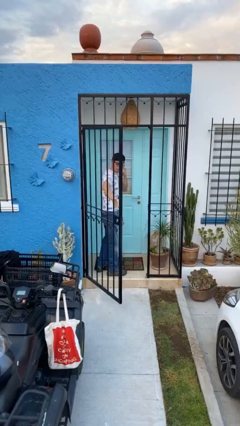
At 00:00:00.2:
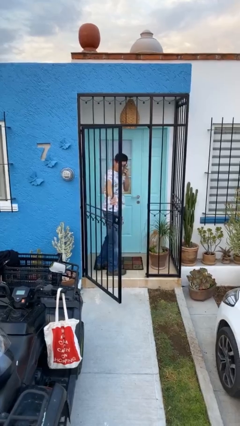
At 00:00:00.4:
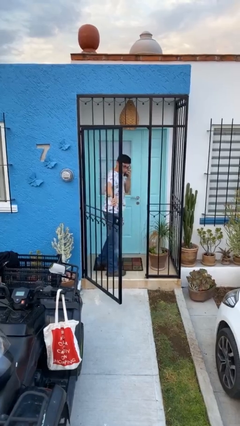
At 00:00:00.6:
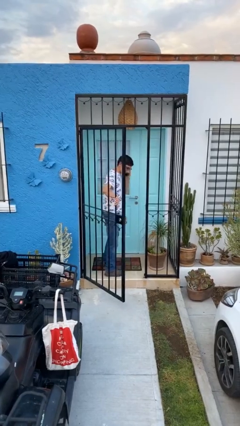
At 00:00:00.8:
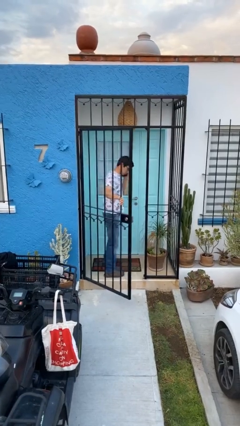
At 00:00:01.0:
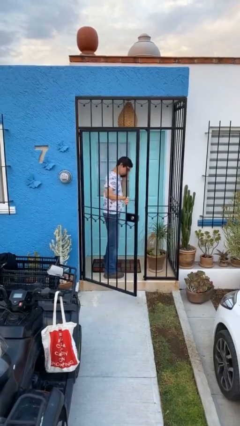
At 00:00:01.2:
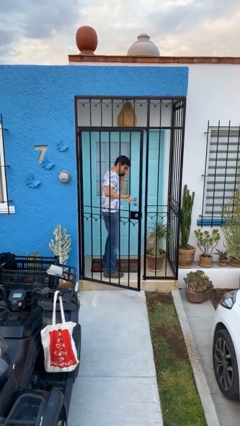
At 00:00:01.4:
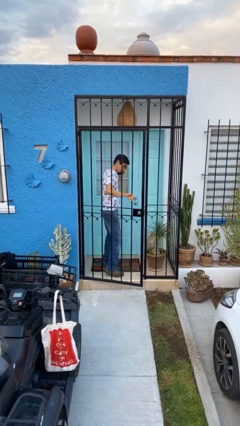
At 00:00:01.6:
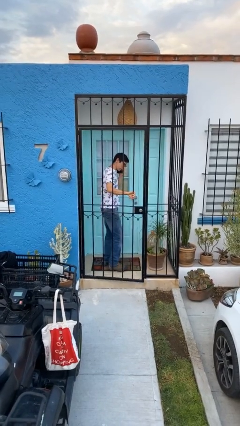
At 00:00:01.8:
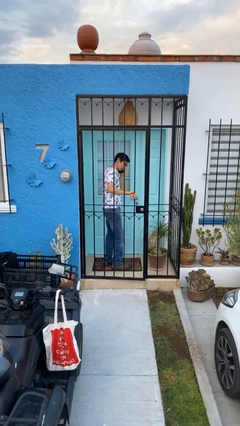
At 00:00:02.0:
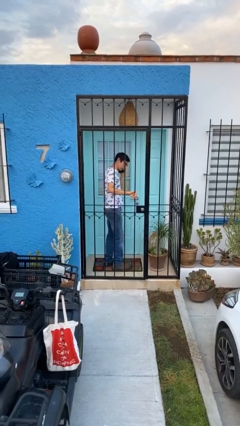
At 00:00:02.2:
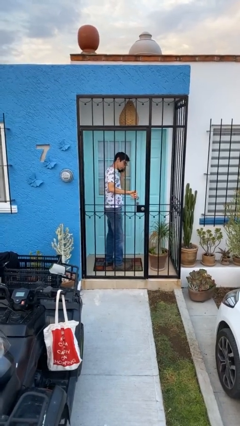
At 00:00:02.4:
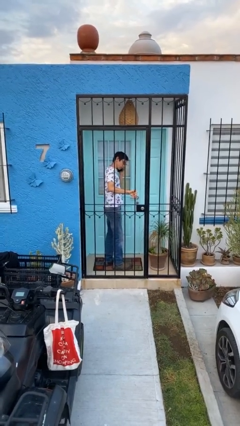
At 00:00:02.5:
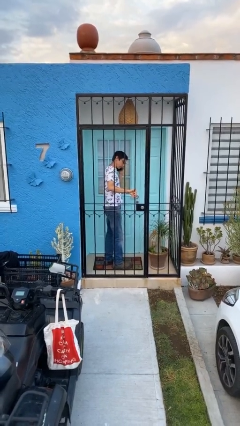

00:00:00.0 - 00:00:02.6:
person closes facility door

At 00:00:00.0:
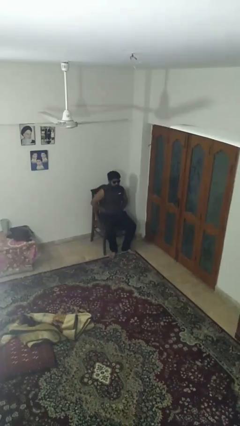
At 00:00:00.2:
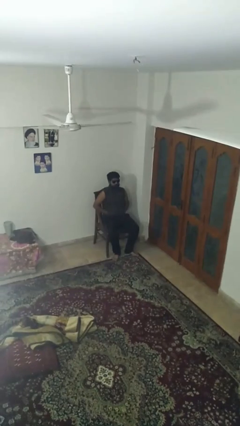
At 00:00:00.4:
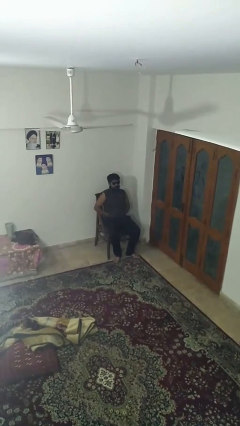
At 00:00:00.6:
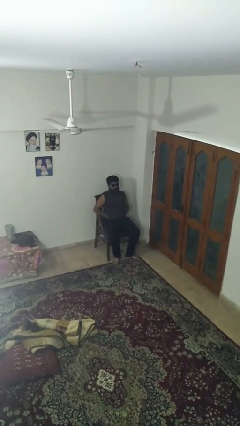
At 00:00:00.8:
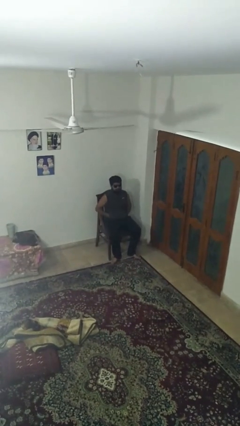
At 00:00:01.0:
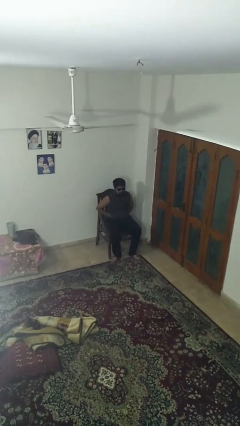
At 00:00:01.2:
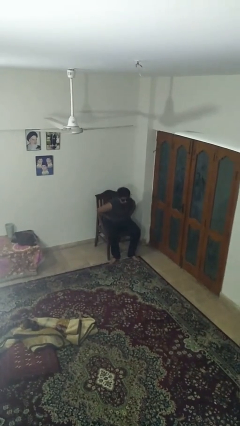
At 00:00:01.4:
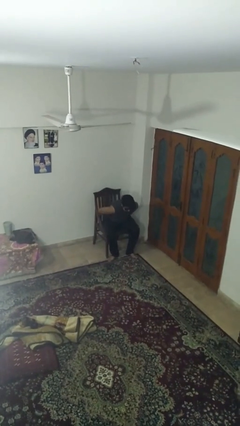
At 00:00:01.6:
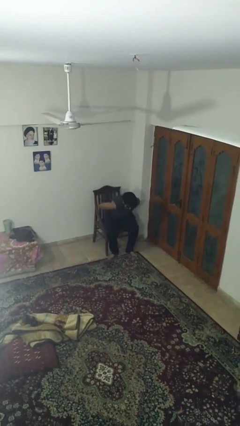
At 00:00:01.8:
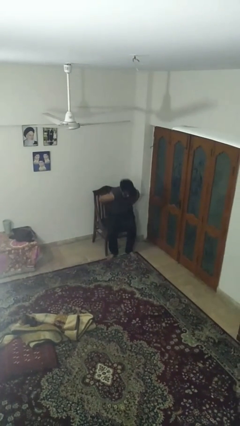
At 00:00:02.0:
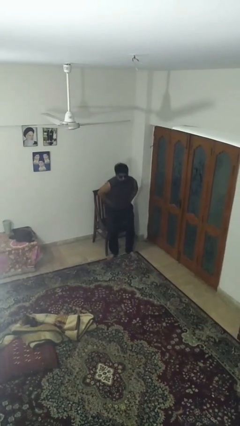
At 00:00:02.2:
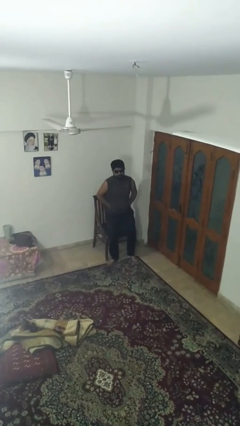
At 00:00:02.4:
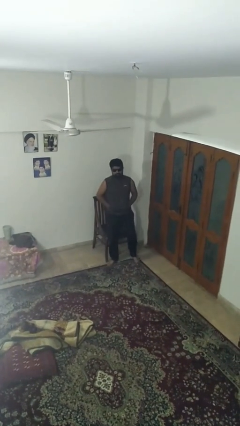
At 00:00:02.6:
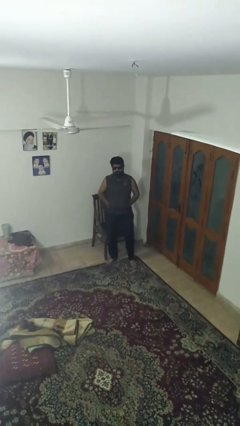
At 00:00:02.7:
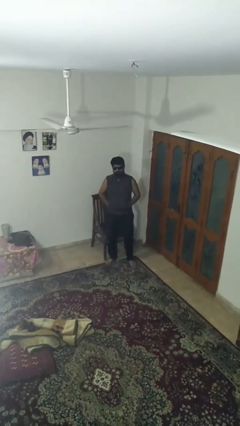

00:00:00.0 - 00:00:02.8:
person stands up

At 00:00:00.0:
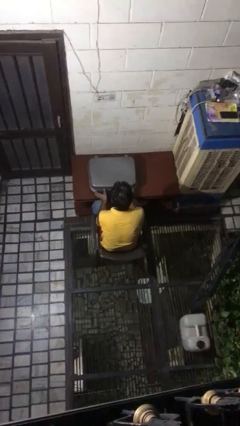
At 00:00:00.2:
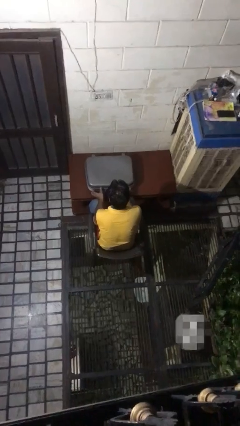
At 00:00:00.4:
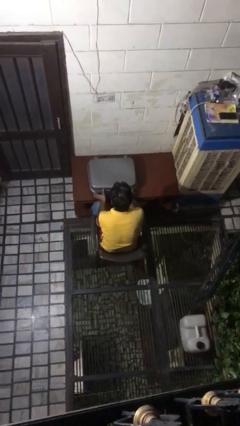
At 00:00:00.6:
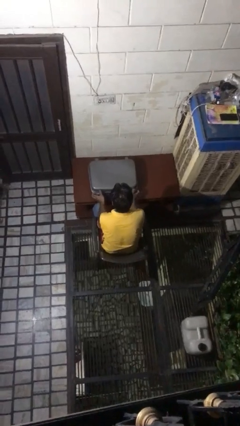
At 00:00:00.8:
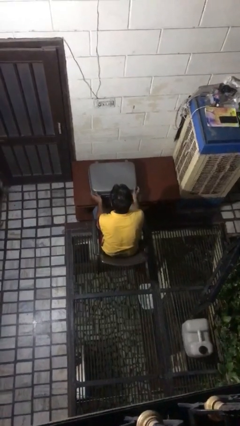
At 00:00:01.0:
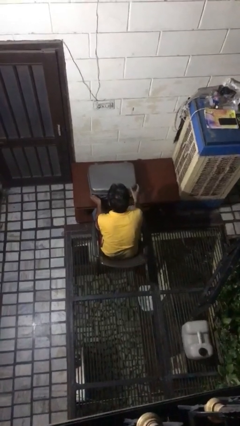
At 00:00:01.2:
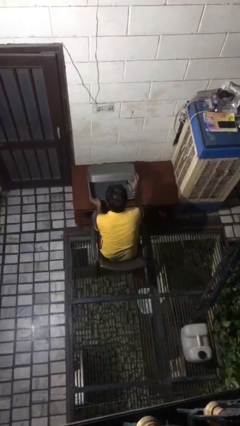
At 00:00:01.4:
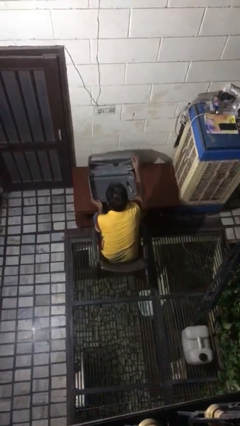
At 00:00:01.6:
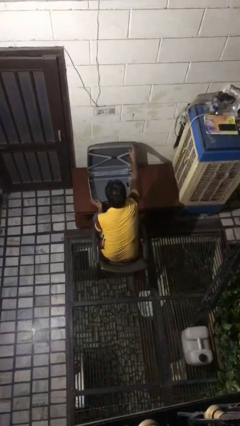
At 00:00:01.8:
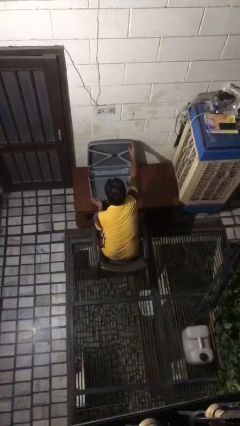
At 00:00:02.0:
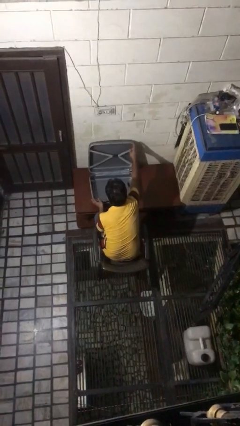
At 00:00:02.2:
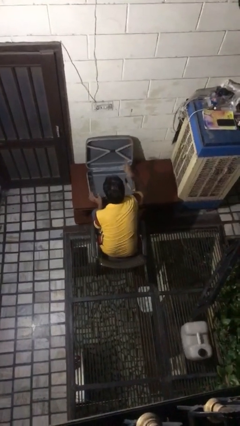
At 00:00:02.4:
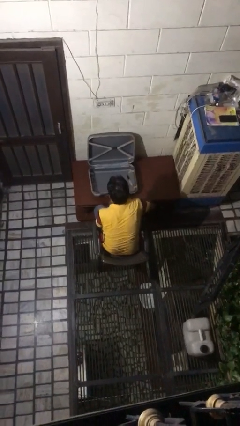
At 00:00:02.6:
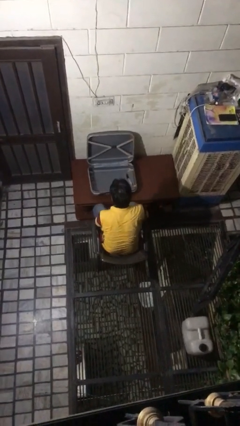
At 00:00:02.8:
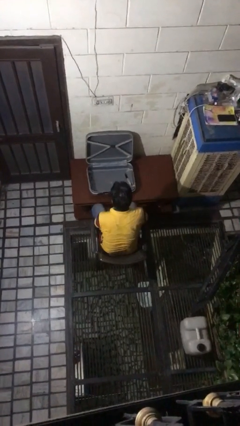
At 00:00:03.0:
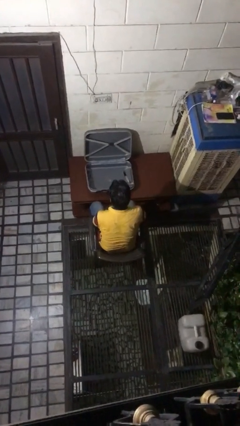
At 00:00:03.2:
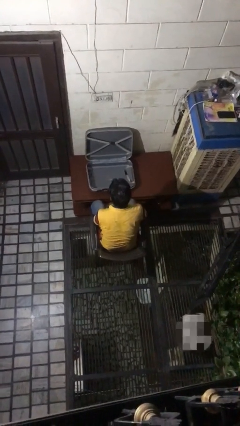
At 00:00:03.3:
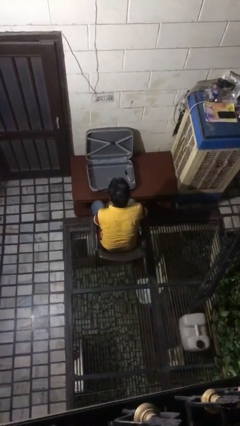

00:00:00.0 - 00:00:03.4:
person opens suitcase

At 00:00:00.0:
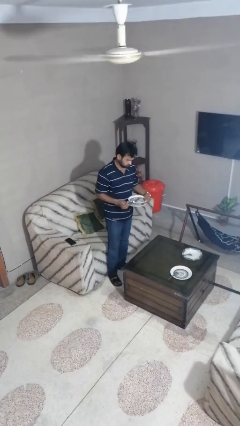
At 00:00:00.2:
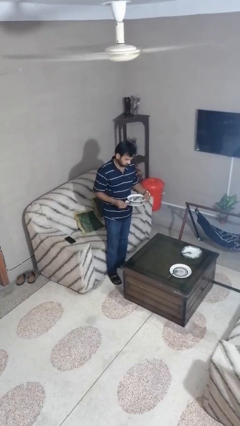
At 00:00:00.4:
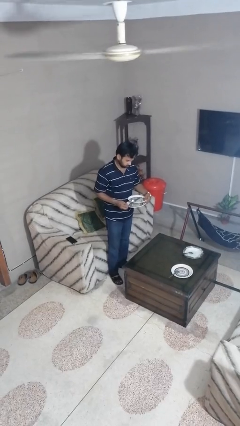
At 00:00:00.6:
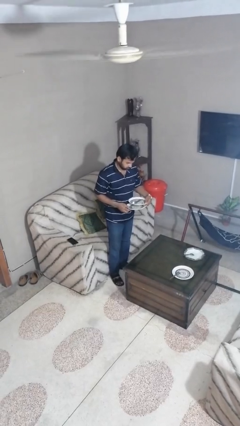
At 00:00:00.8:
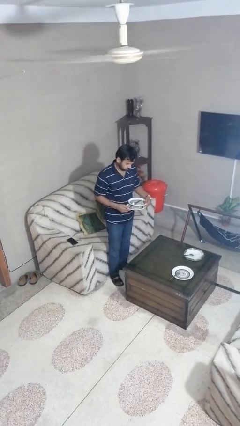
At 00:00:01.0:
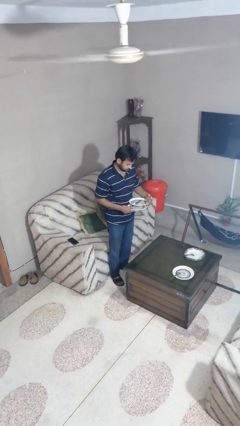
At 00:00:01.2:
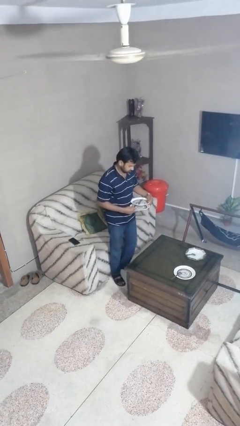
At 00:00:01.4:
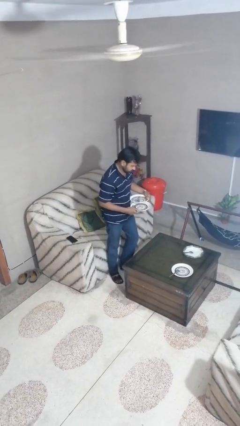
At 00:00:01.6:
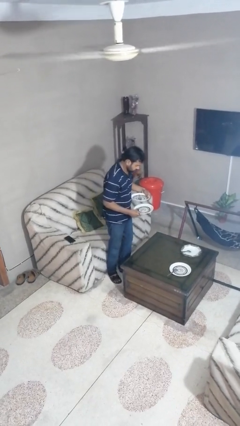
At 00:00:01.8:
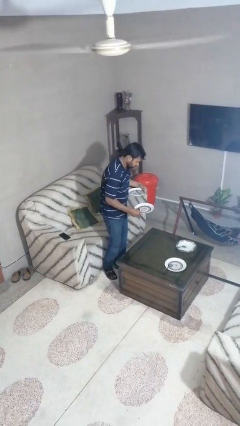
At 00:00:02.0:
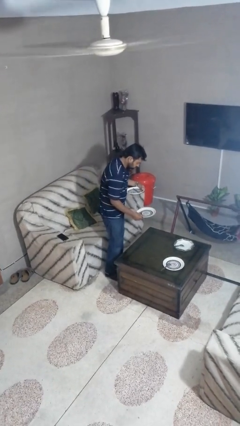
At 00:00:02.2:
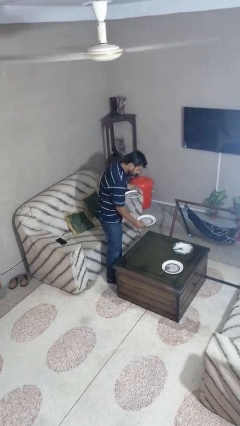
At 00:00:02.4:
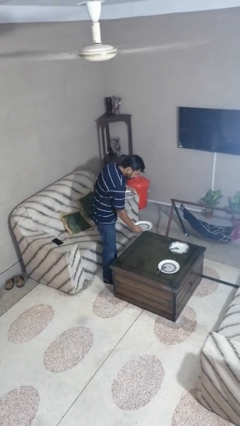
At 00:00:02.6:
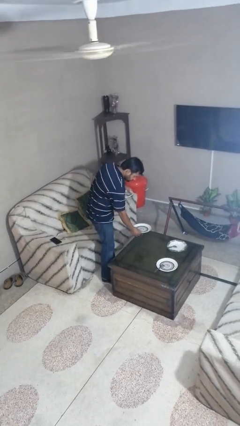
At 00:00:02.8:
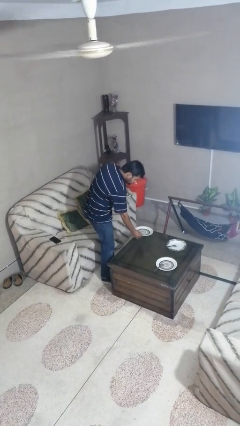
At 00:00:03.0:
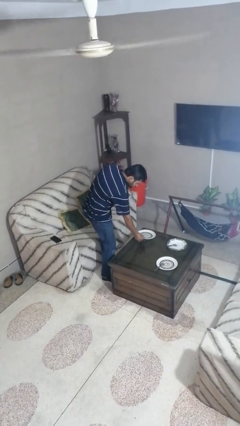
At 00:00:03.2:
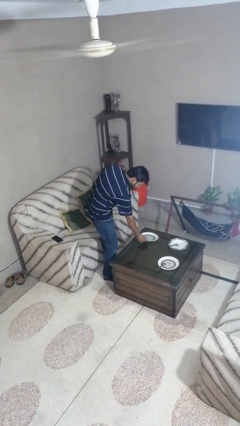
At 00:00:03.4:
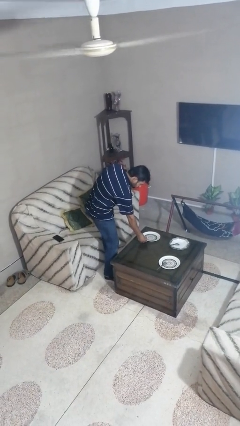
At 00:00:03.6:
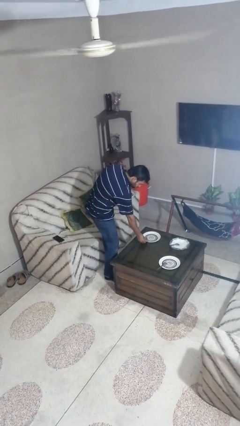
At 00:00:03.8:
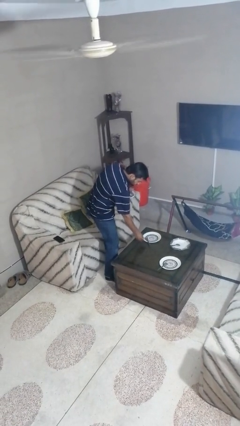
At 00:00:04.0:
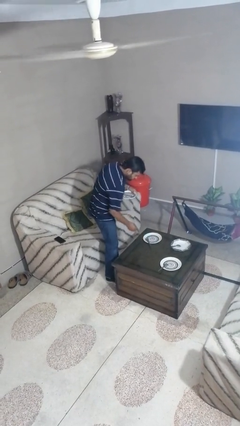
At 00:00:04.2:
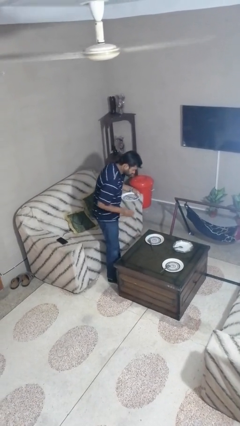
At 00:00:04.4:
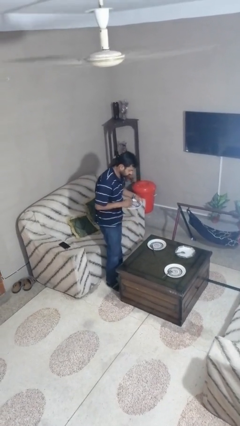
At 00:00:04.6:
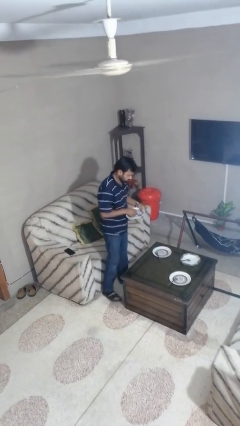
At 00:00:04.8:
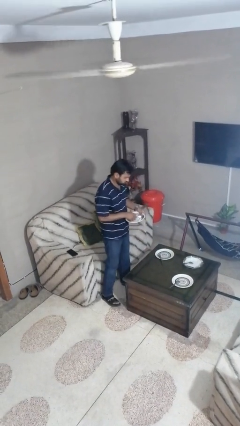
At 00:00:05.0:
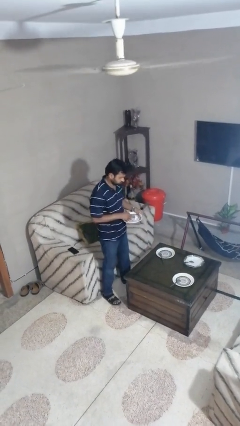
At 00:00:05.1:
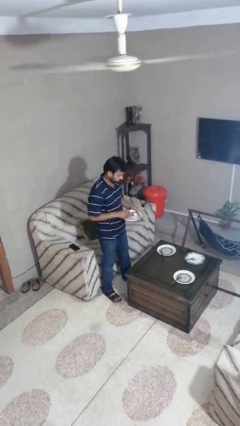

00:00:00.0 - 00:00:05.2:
person sets table

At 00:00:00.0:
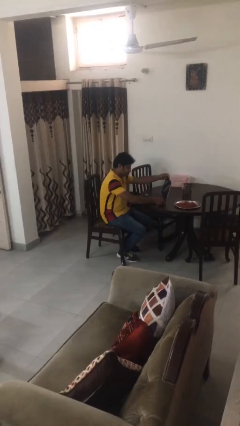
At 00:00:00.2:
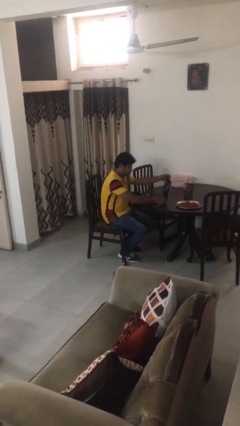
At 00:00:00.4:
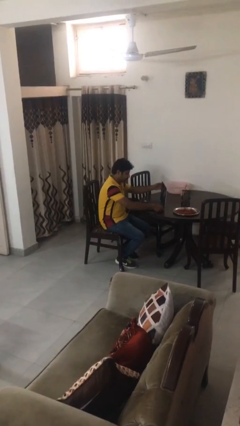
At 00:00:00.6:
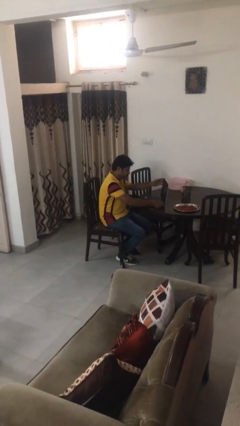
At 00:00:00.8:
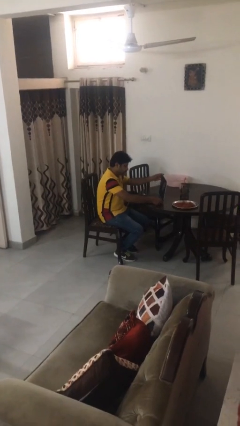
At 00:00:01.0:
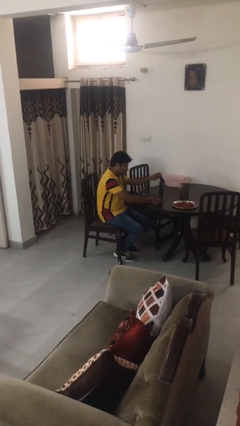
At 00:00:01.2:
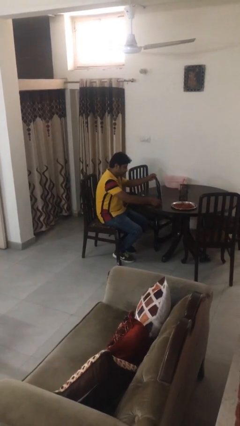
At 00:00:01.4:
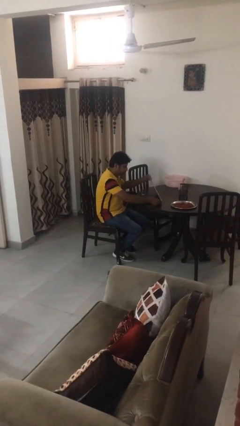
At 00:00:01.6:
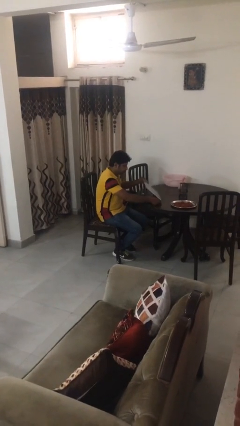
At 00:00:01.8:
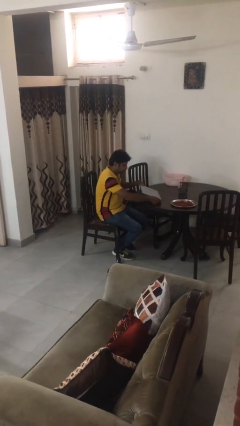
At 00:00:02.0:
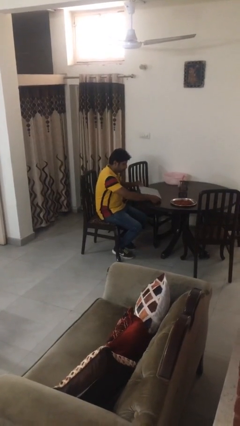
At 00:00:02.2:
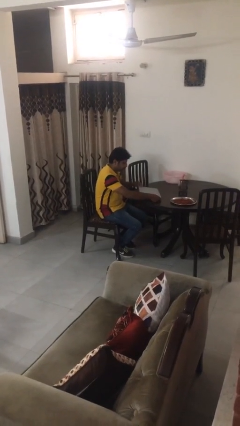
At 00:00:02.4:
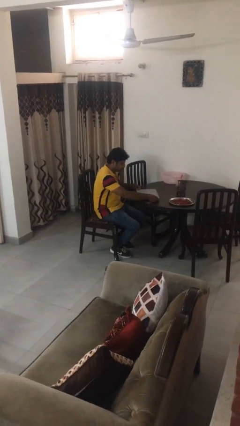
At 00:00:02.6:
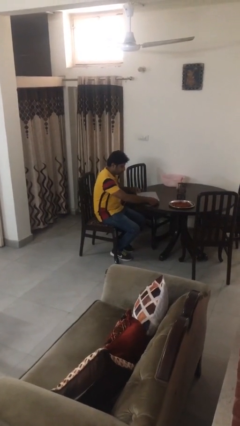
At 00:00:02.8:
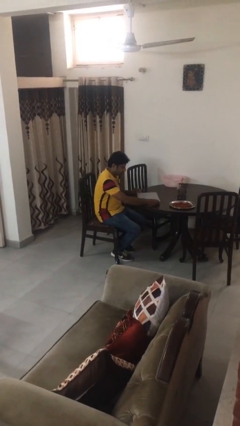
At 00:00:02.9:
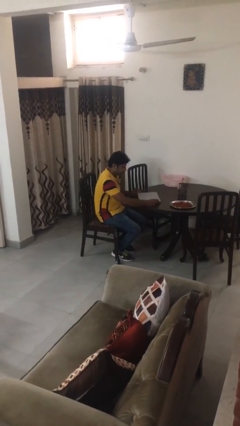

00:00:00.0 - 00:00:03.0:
person closes laptop

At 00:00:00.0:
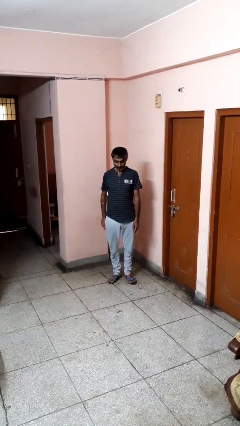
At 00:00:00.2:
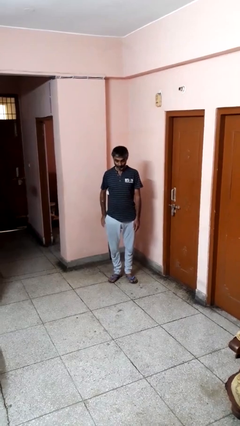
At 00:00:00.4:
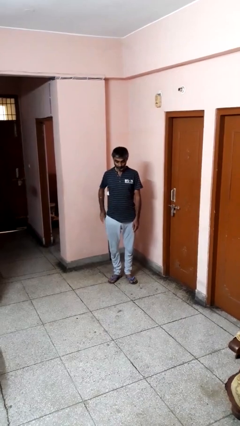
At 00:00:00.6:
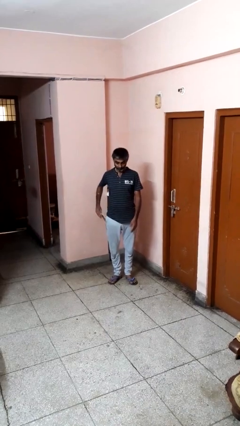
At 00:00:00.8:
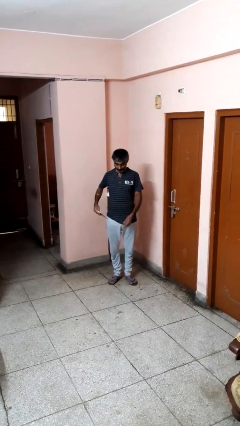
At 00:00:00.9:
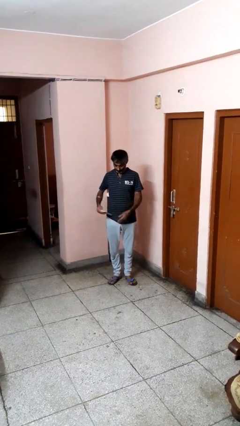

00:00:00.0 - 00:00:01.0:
person takes phone from pocket
